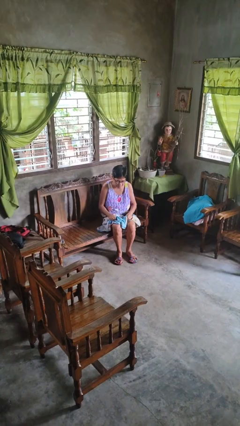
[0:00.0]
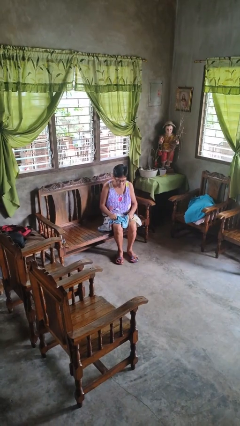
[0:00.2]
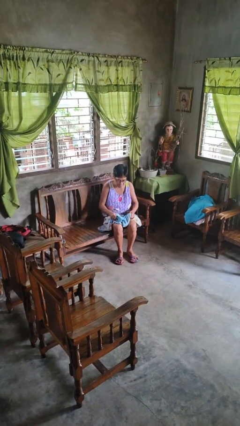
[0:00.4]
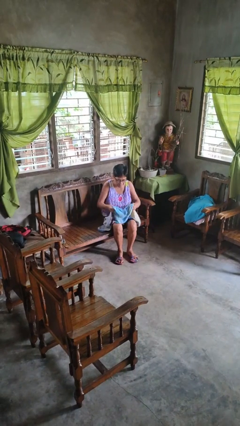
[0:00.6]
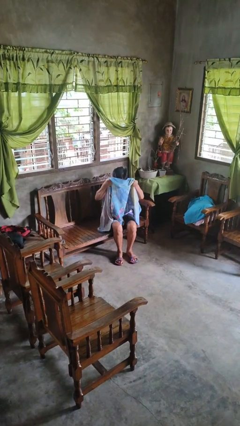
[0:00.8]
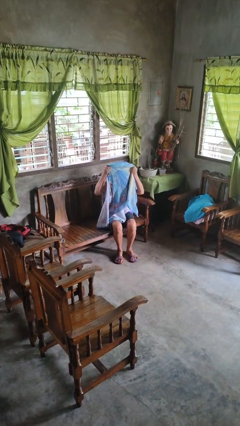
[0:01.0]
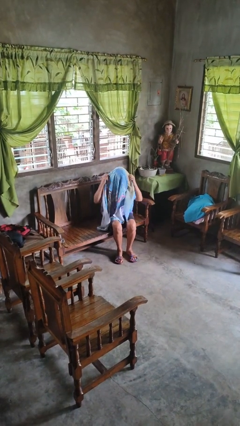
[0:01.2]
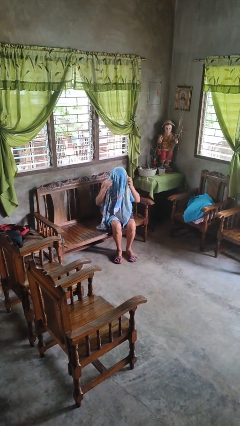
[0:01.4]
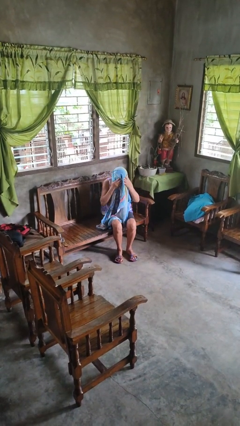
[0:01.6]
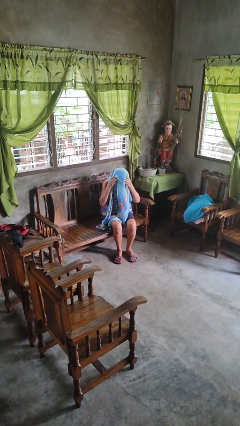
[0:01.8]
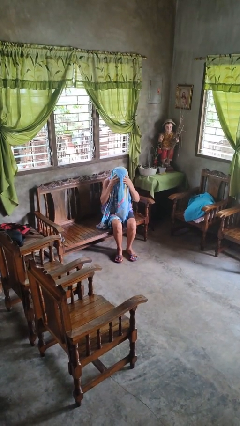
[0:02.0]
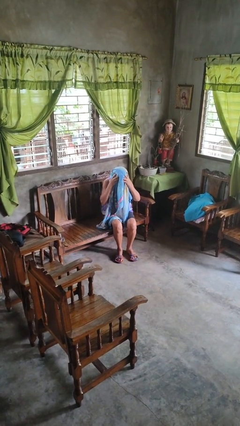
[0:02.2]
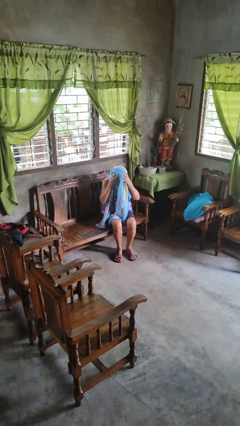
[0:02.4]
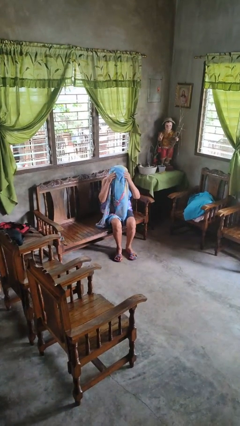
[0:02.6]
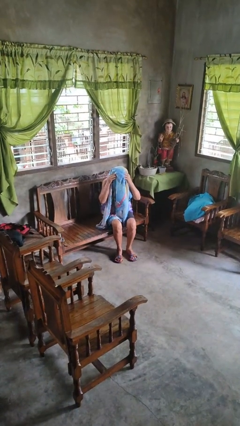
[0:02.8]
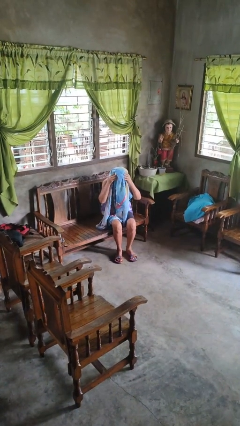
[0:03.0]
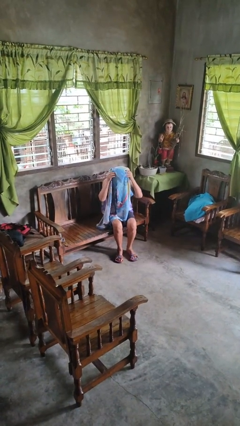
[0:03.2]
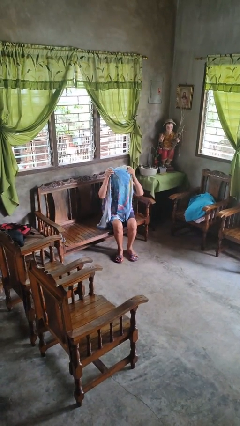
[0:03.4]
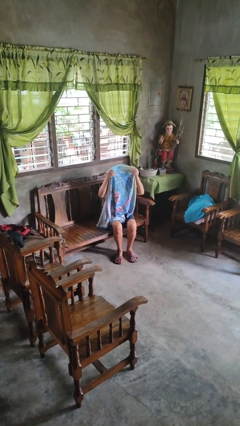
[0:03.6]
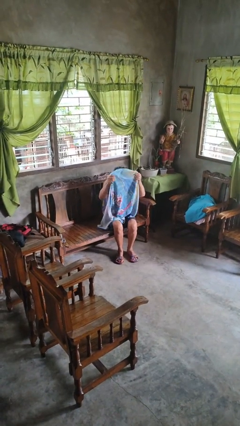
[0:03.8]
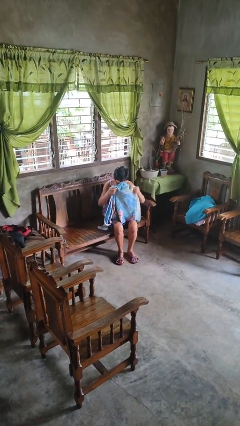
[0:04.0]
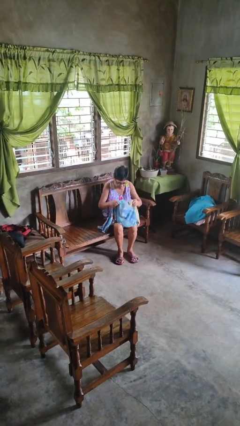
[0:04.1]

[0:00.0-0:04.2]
person dries hair with towel

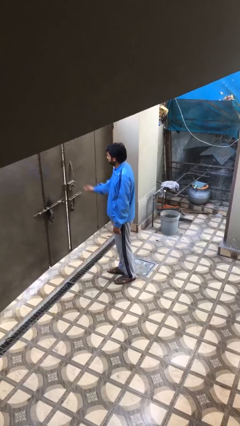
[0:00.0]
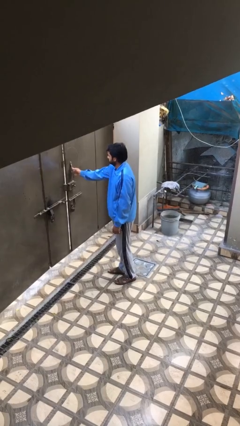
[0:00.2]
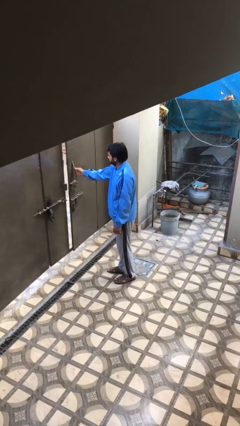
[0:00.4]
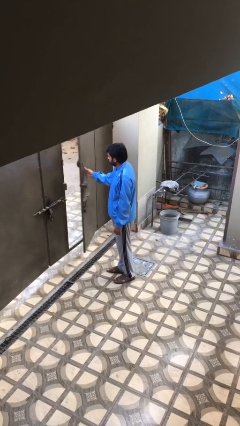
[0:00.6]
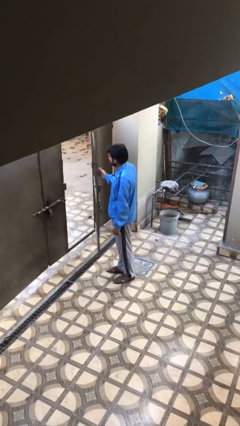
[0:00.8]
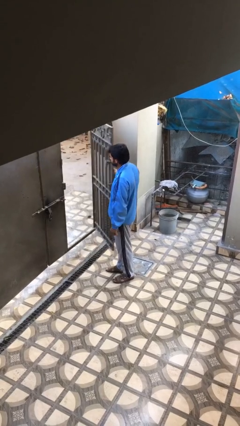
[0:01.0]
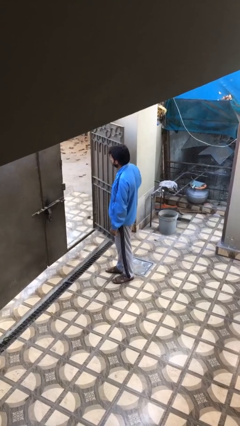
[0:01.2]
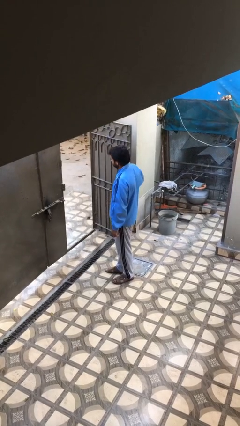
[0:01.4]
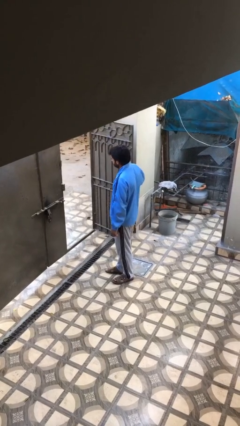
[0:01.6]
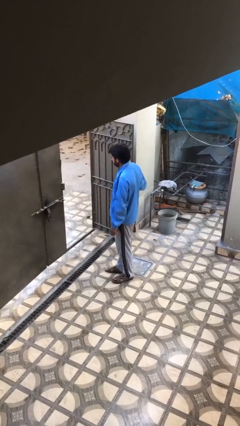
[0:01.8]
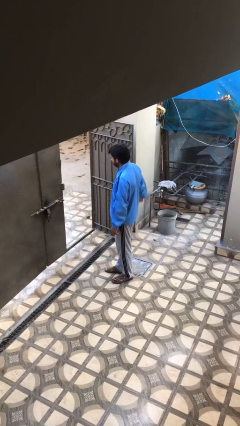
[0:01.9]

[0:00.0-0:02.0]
person opens facility door

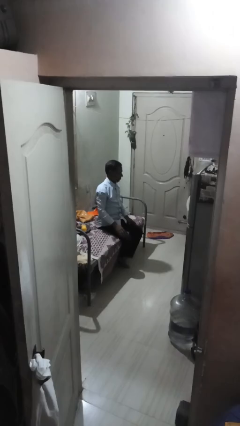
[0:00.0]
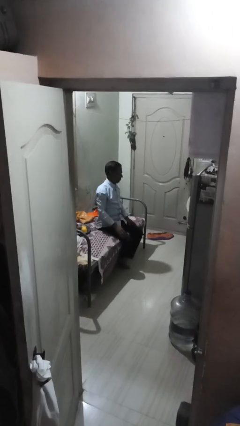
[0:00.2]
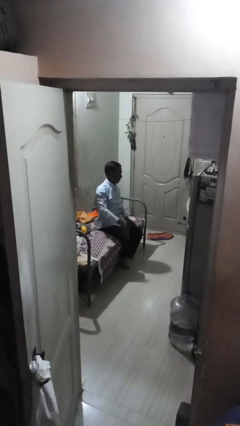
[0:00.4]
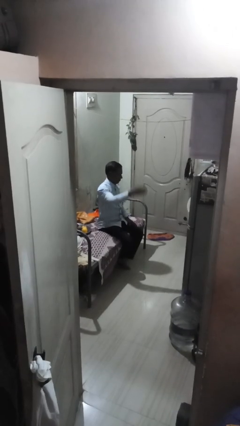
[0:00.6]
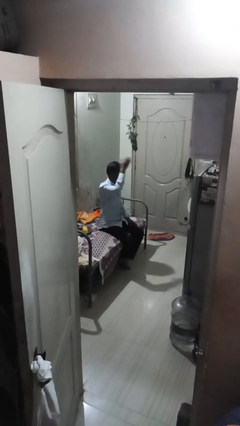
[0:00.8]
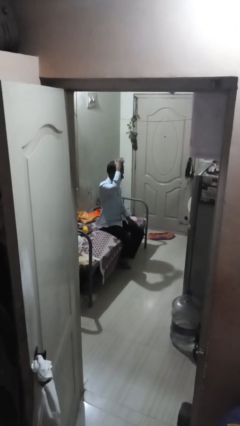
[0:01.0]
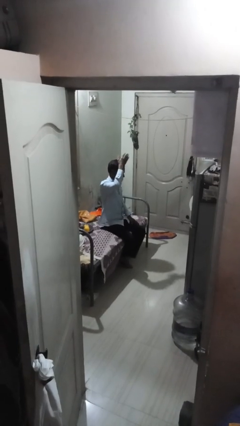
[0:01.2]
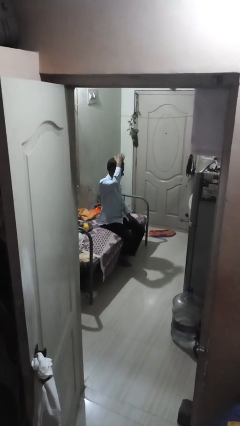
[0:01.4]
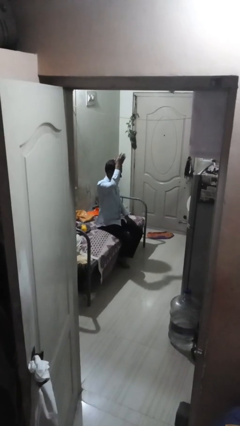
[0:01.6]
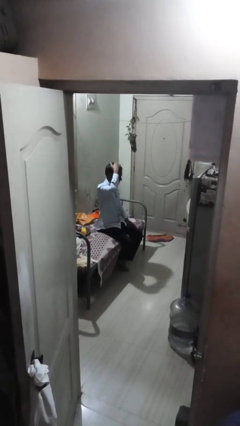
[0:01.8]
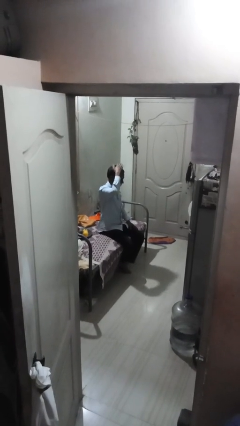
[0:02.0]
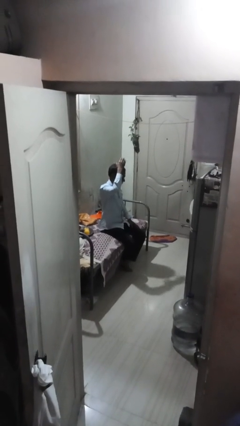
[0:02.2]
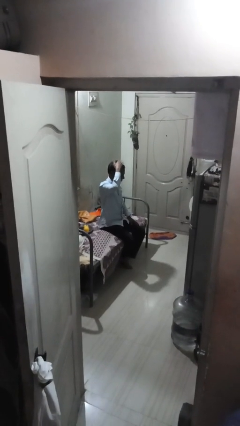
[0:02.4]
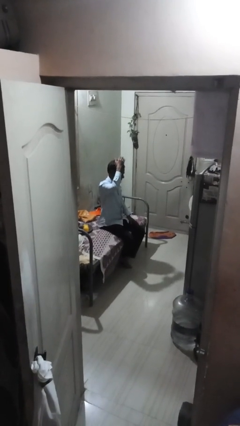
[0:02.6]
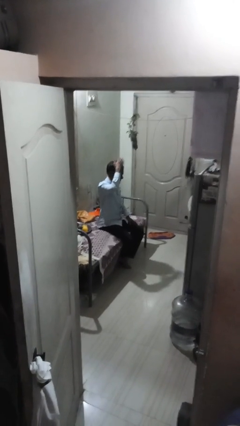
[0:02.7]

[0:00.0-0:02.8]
person pats head

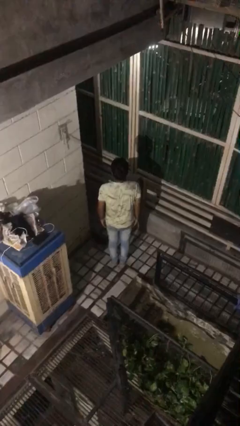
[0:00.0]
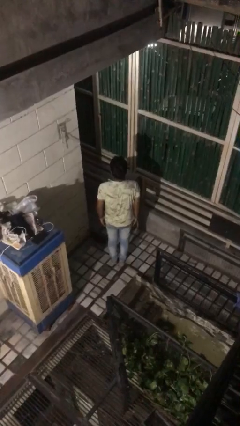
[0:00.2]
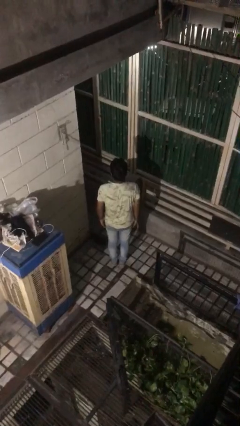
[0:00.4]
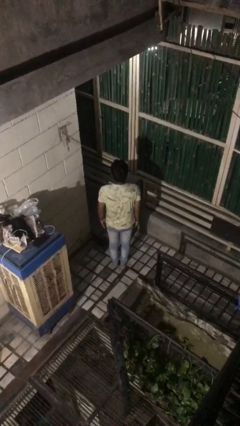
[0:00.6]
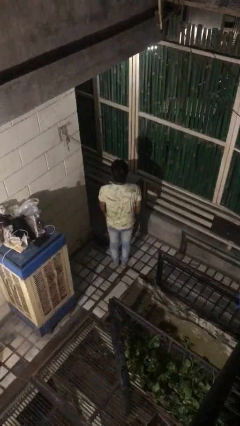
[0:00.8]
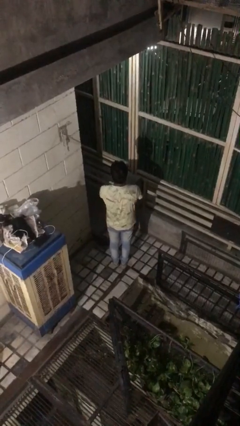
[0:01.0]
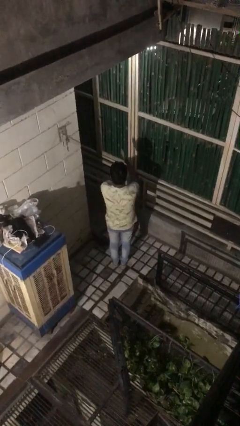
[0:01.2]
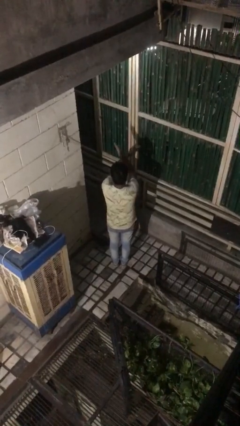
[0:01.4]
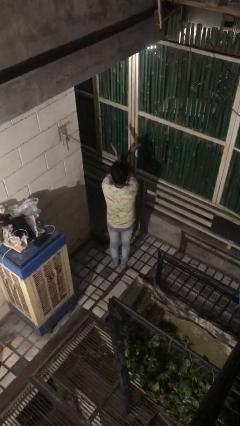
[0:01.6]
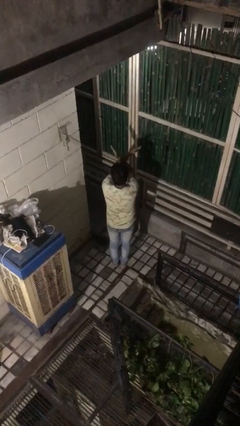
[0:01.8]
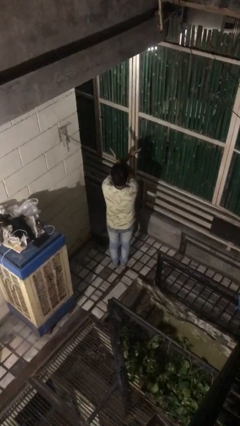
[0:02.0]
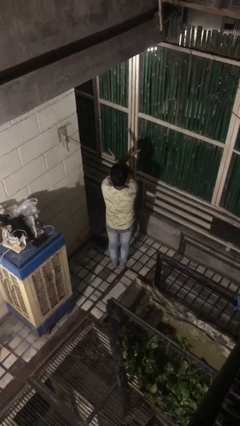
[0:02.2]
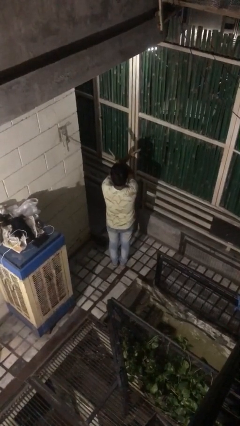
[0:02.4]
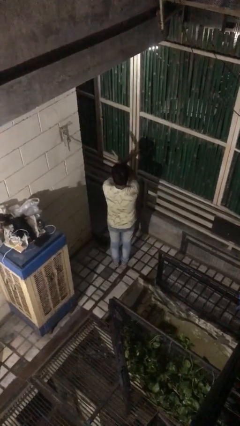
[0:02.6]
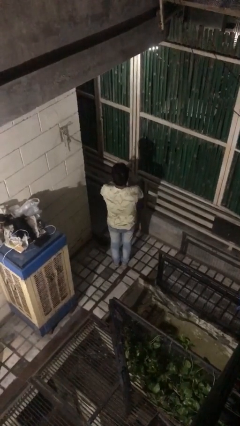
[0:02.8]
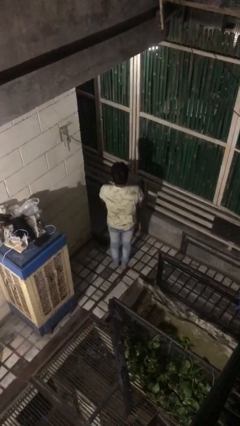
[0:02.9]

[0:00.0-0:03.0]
person gestures arms x

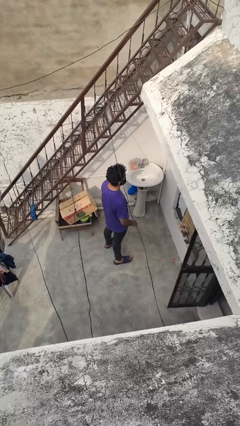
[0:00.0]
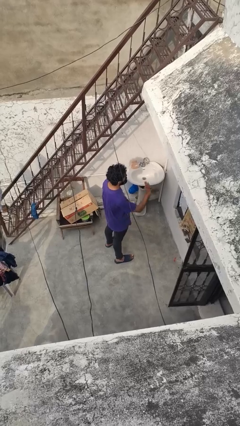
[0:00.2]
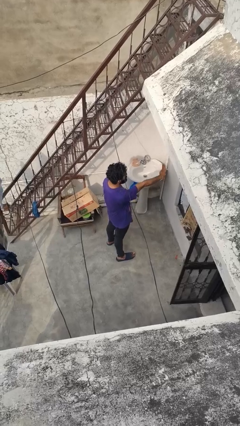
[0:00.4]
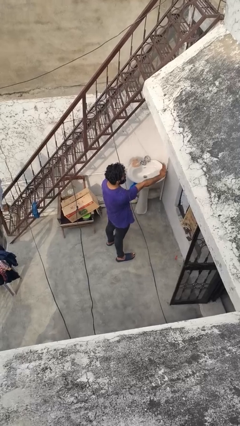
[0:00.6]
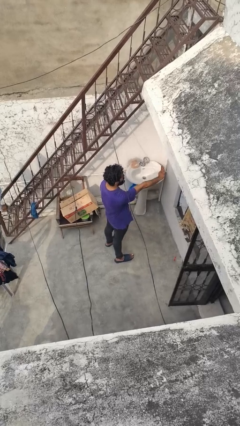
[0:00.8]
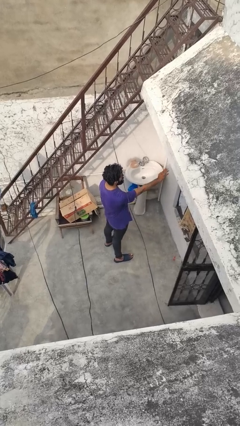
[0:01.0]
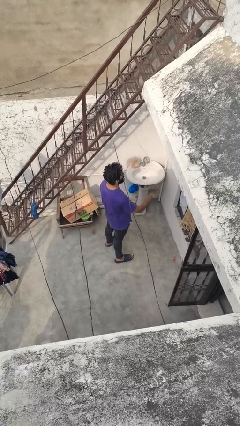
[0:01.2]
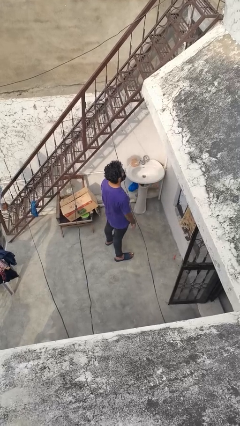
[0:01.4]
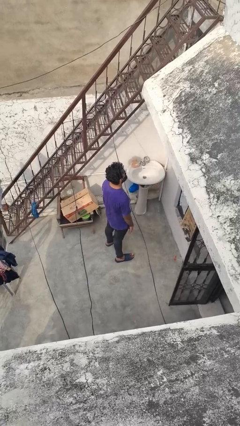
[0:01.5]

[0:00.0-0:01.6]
person gestures stop

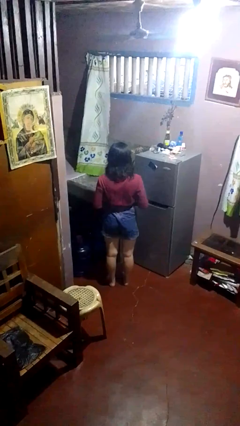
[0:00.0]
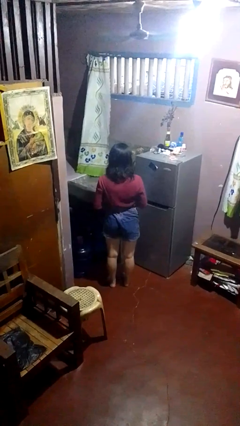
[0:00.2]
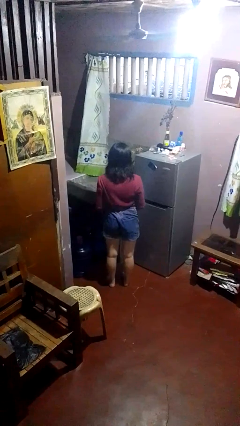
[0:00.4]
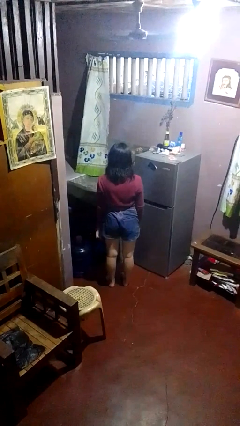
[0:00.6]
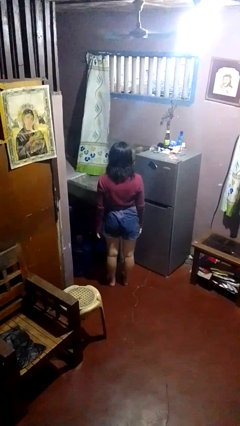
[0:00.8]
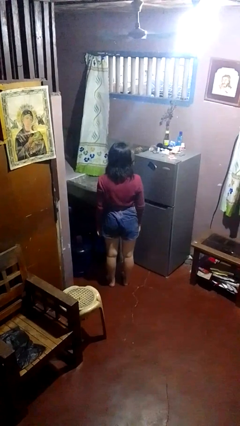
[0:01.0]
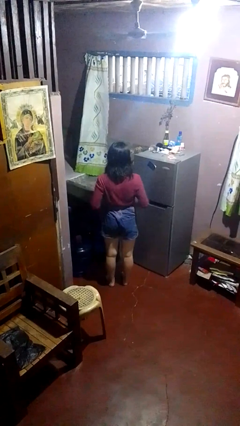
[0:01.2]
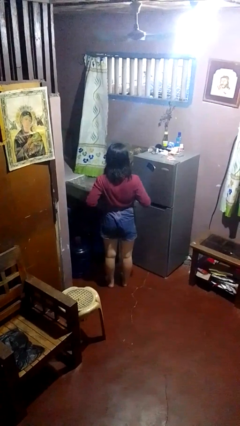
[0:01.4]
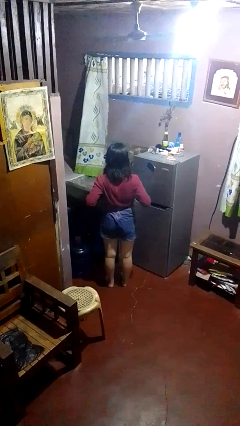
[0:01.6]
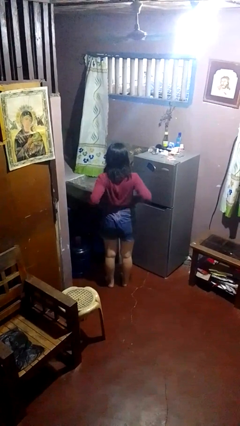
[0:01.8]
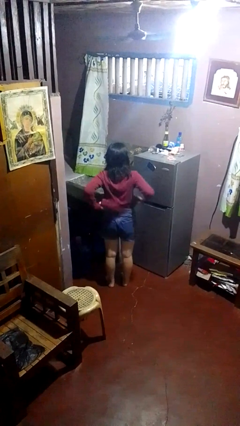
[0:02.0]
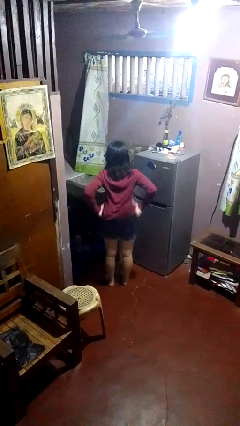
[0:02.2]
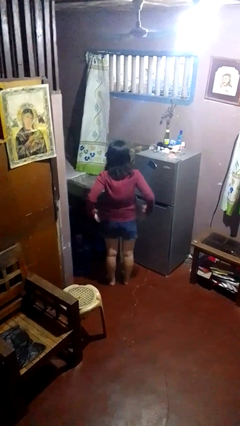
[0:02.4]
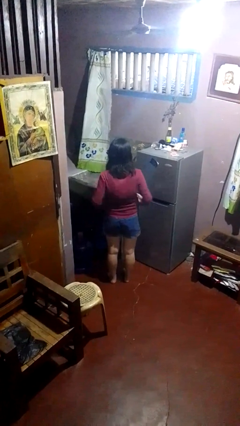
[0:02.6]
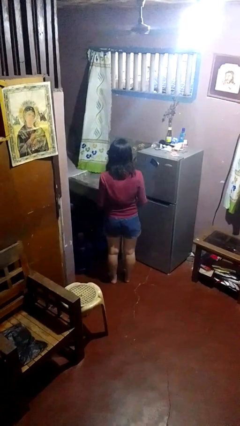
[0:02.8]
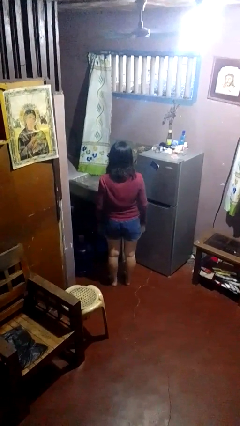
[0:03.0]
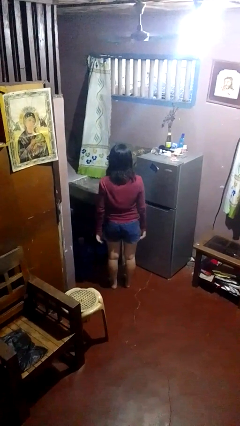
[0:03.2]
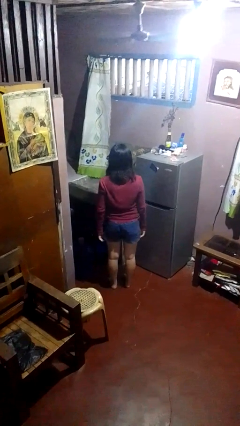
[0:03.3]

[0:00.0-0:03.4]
person untucks shirt

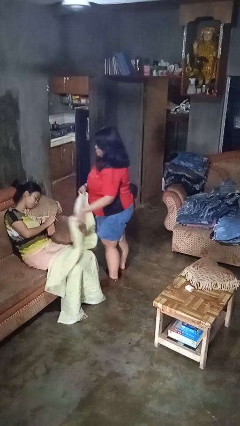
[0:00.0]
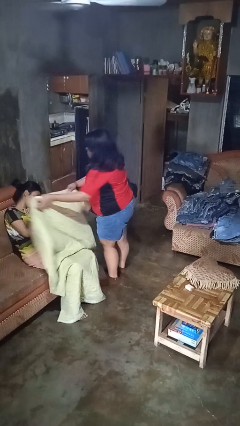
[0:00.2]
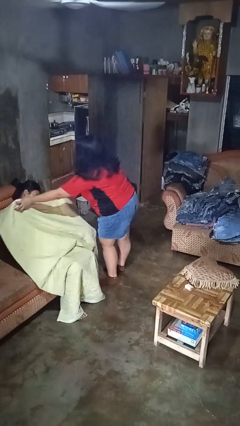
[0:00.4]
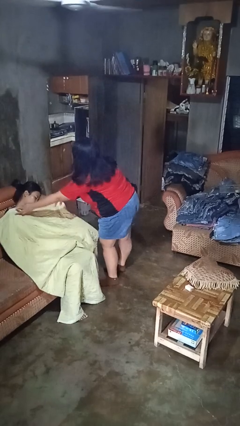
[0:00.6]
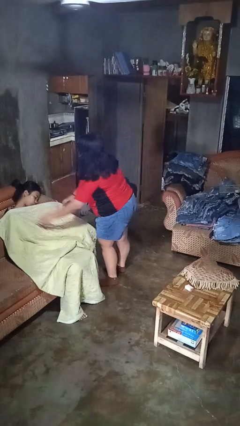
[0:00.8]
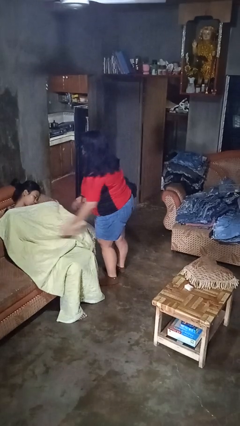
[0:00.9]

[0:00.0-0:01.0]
person covers friend with blanket
